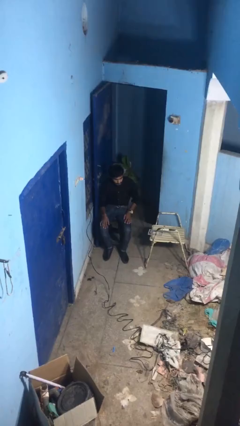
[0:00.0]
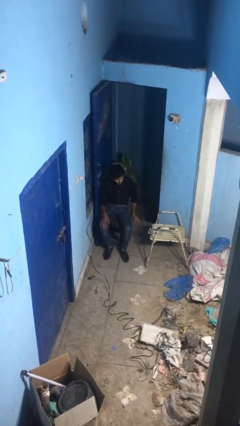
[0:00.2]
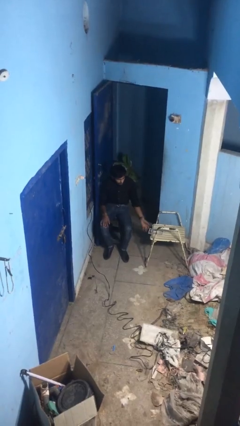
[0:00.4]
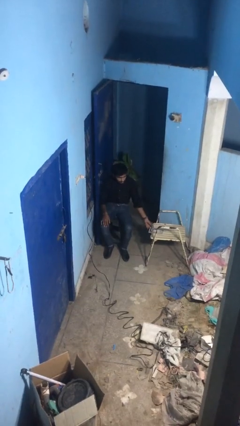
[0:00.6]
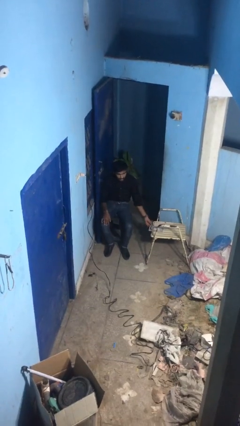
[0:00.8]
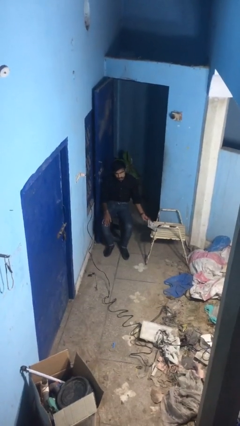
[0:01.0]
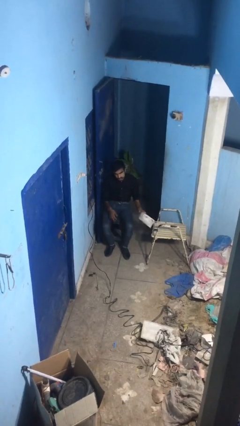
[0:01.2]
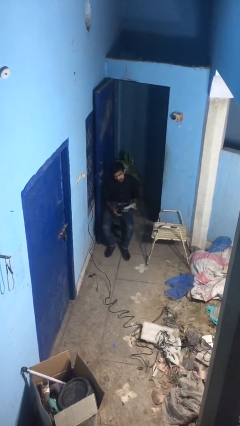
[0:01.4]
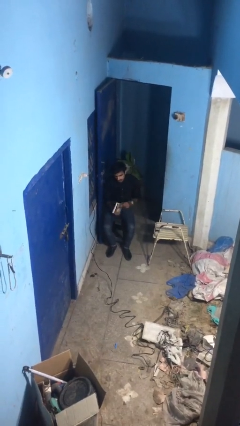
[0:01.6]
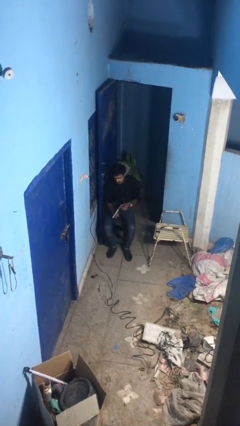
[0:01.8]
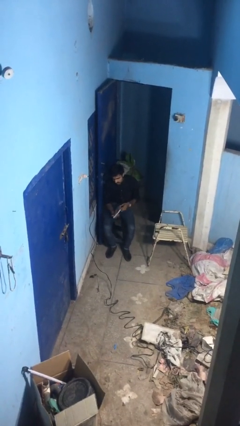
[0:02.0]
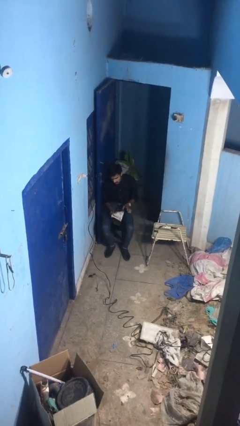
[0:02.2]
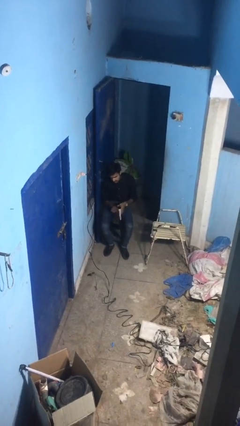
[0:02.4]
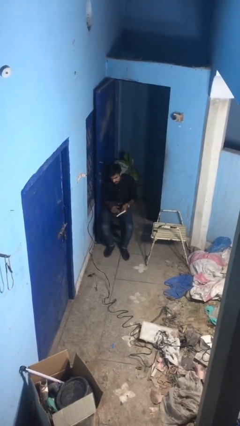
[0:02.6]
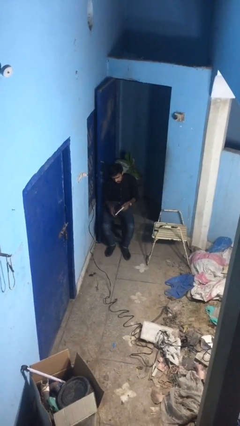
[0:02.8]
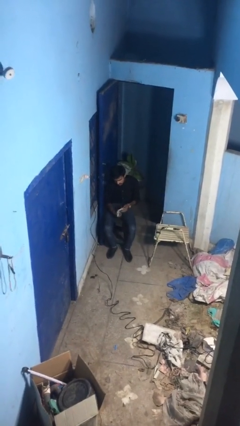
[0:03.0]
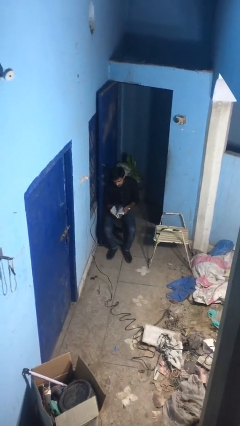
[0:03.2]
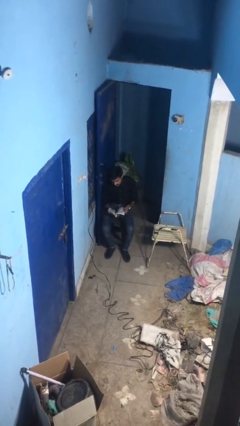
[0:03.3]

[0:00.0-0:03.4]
person picks up object from table

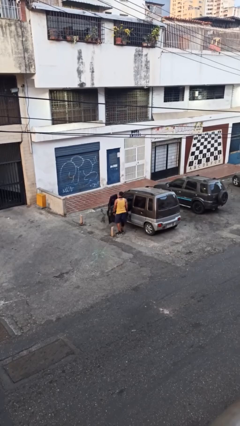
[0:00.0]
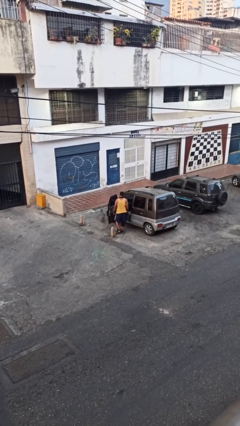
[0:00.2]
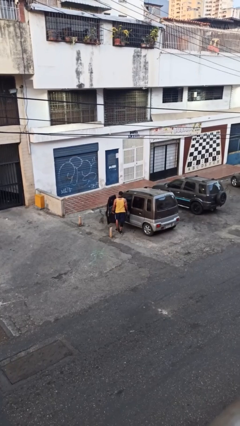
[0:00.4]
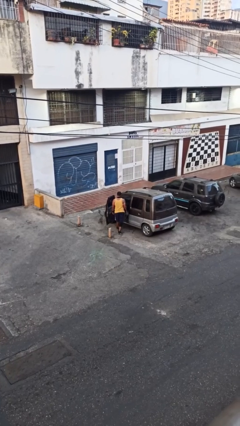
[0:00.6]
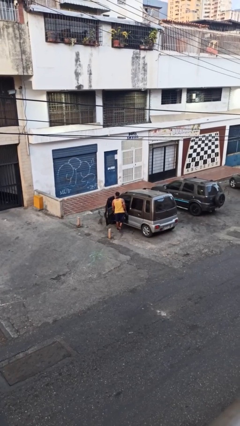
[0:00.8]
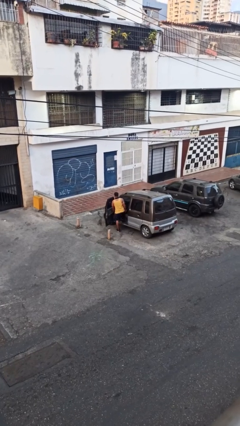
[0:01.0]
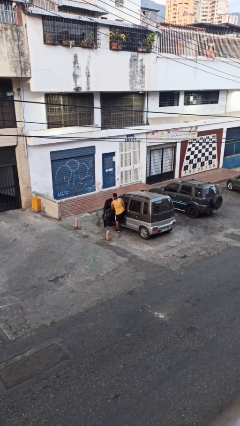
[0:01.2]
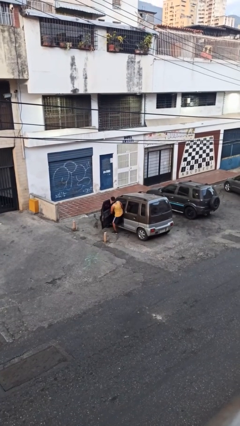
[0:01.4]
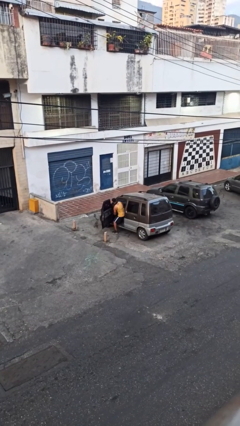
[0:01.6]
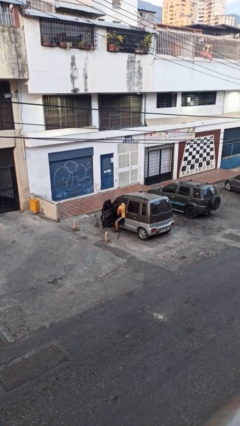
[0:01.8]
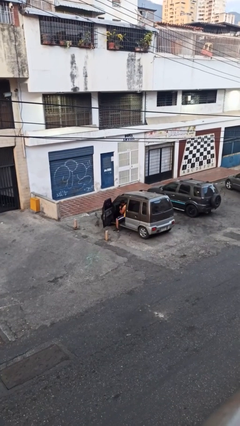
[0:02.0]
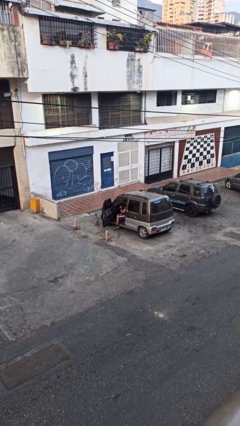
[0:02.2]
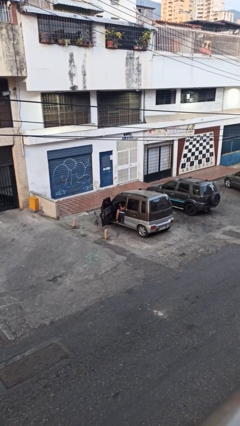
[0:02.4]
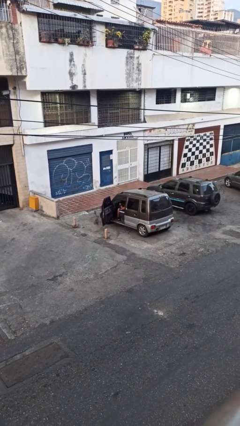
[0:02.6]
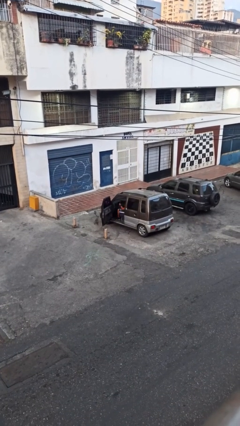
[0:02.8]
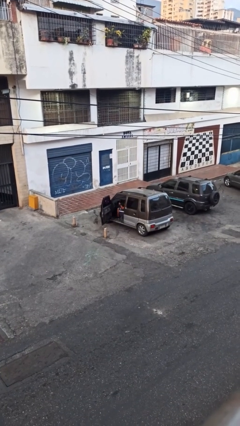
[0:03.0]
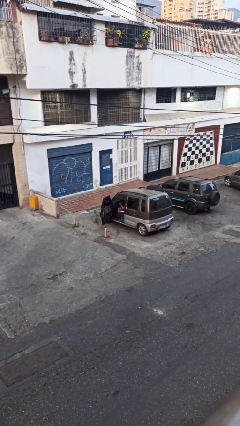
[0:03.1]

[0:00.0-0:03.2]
person enters car

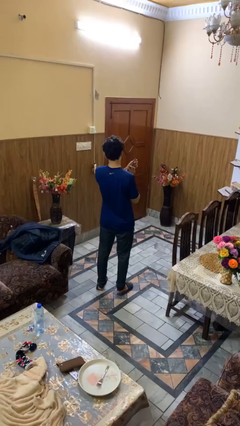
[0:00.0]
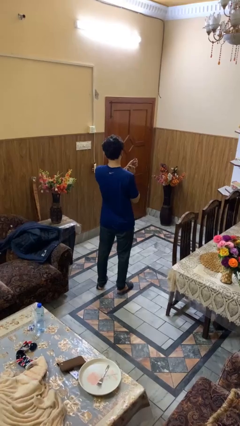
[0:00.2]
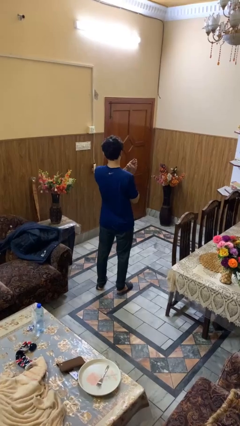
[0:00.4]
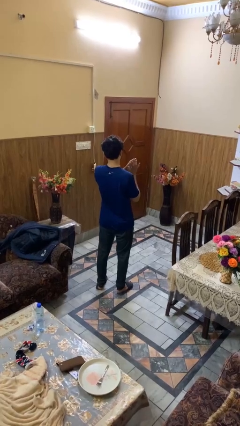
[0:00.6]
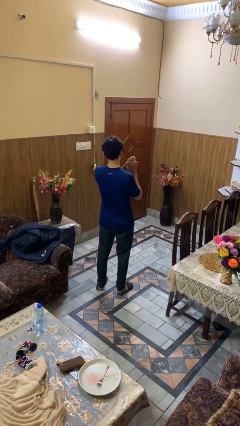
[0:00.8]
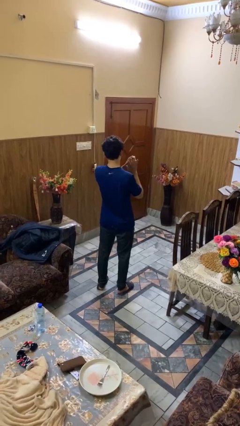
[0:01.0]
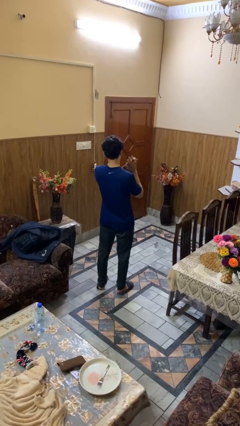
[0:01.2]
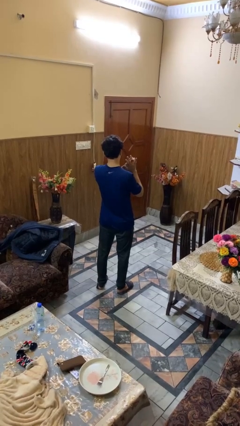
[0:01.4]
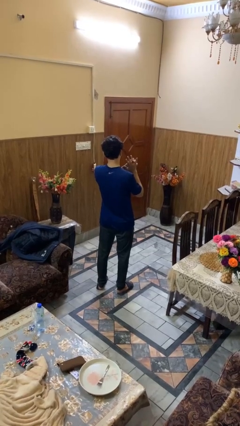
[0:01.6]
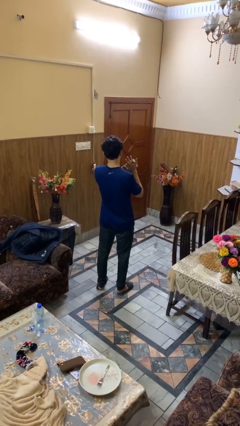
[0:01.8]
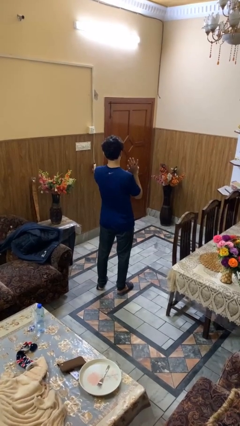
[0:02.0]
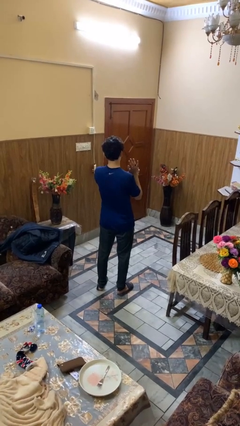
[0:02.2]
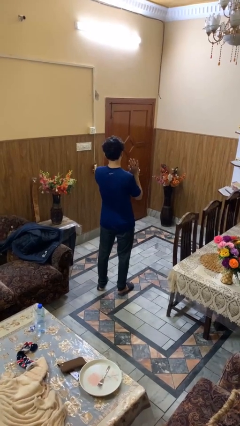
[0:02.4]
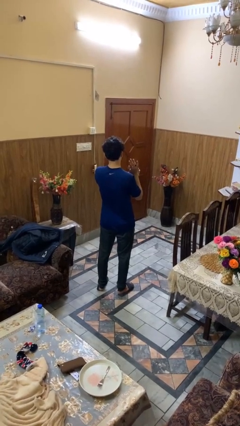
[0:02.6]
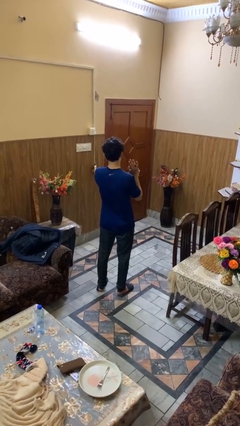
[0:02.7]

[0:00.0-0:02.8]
person puts on ring

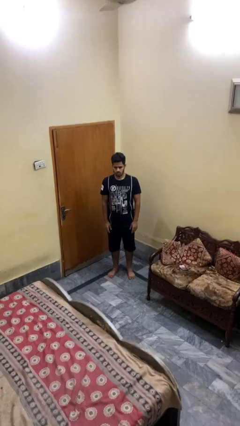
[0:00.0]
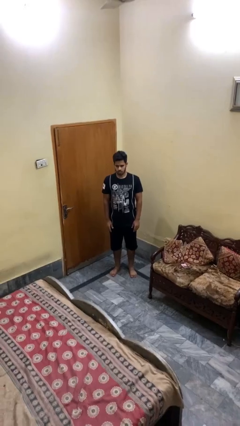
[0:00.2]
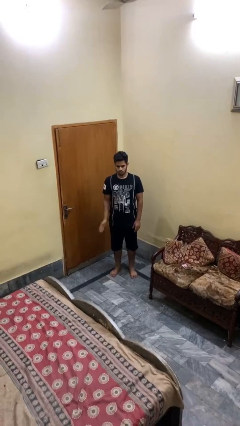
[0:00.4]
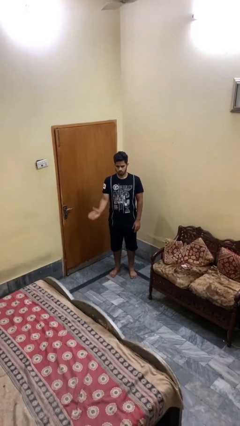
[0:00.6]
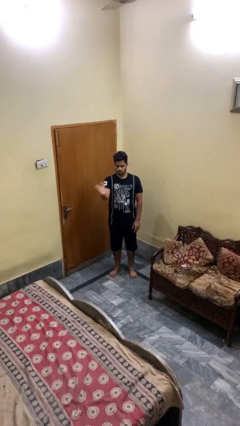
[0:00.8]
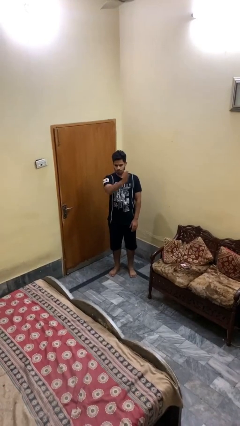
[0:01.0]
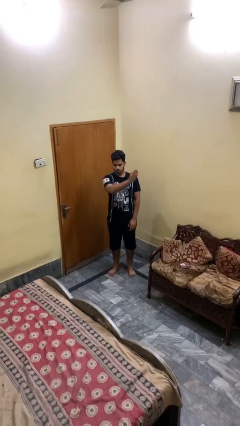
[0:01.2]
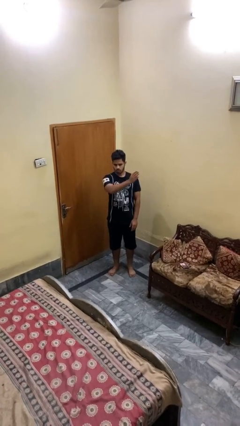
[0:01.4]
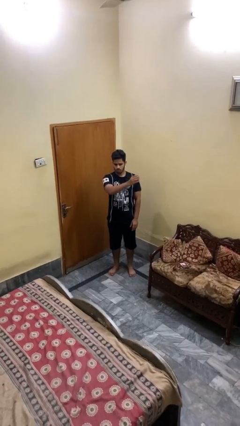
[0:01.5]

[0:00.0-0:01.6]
person gestures swipe left

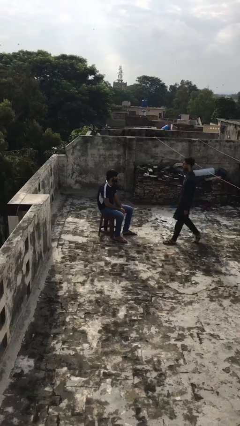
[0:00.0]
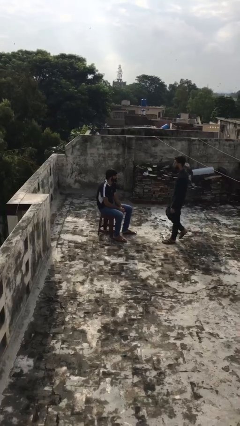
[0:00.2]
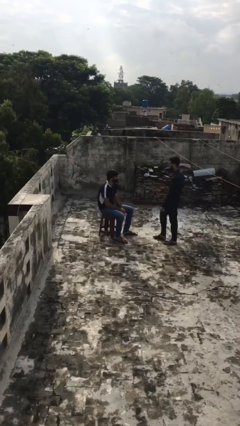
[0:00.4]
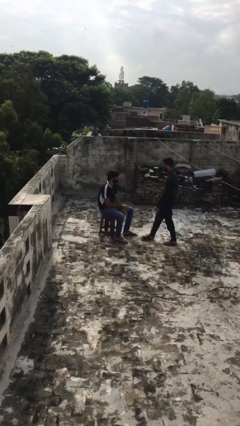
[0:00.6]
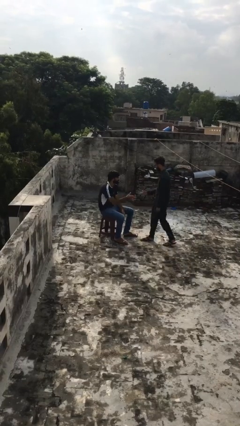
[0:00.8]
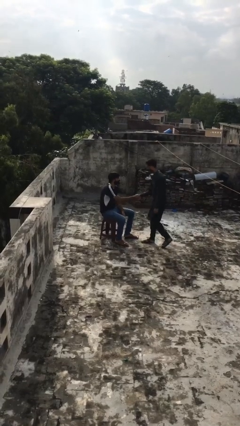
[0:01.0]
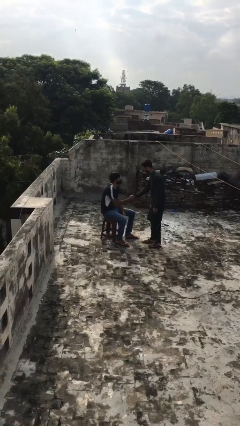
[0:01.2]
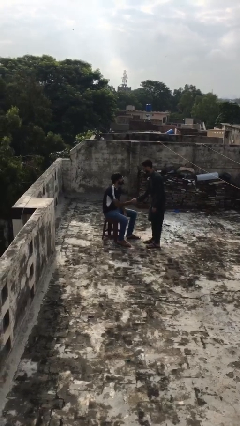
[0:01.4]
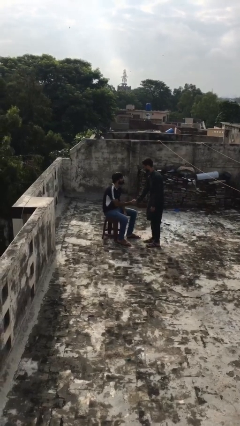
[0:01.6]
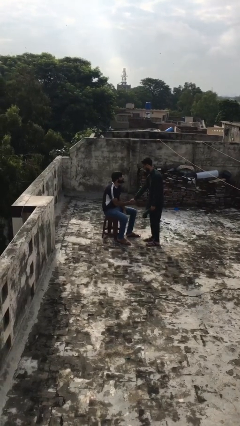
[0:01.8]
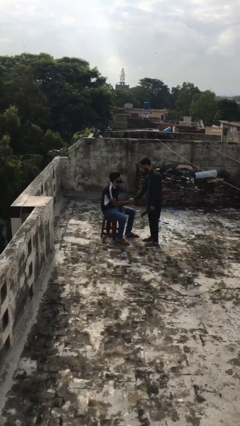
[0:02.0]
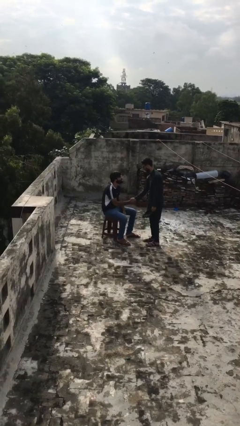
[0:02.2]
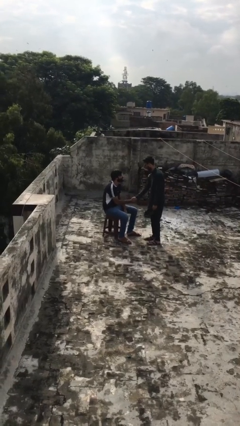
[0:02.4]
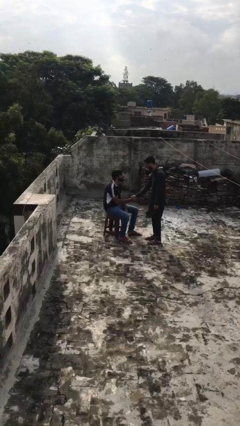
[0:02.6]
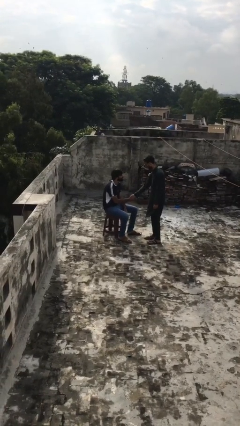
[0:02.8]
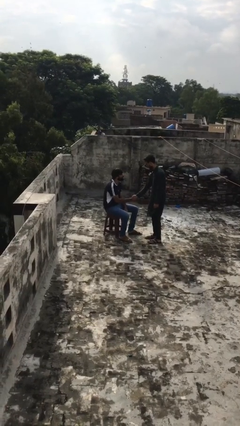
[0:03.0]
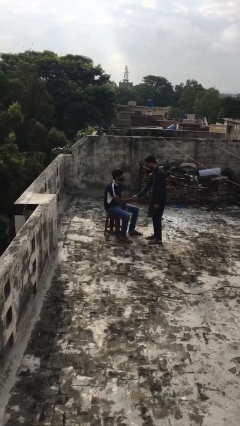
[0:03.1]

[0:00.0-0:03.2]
person shakes hand

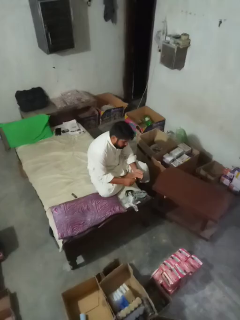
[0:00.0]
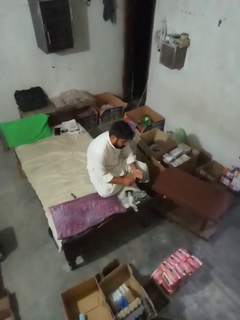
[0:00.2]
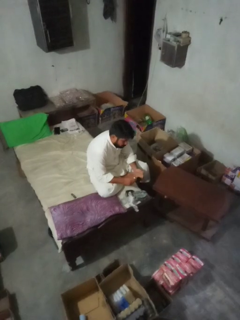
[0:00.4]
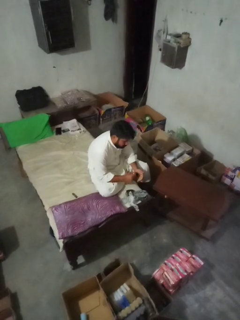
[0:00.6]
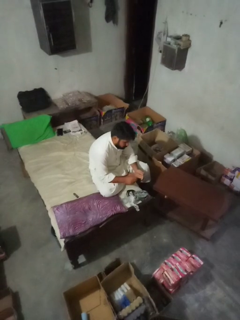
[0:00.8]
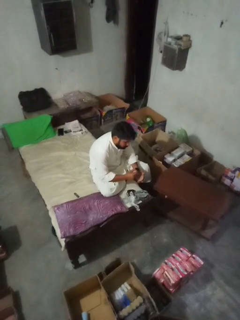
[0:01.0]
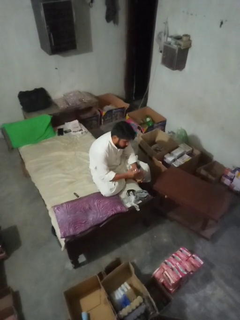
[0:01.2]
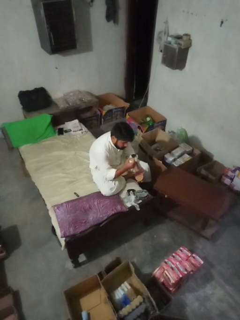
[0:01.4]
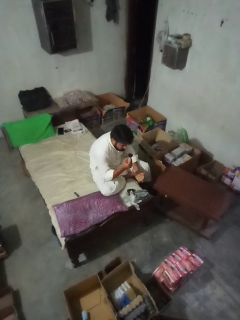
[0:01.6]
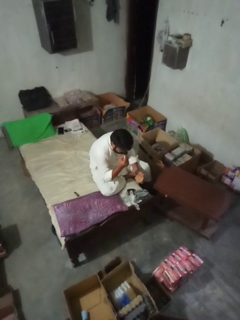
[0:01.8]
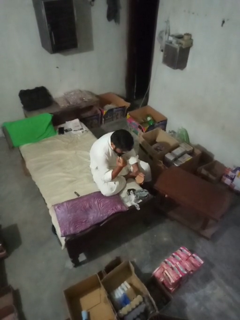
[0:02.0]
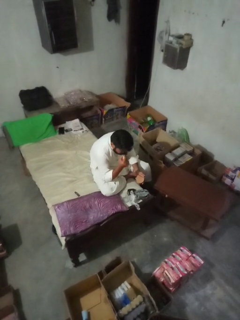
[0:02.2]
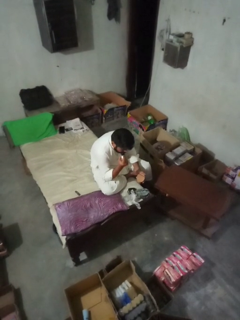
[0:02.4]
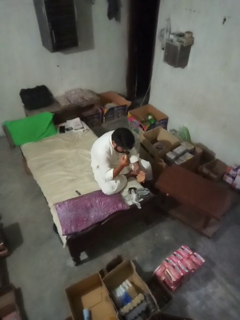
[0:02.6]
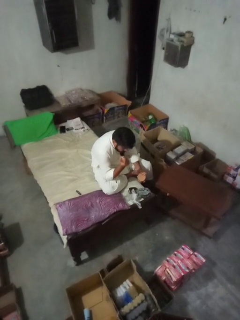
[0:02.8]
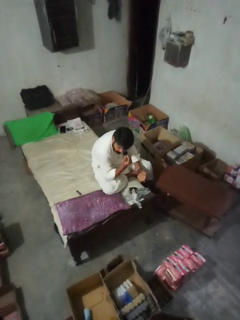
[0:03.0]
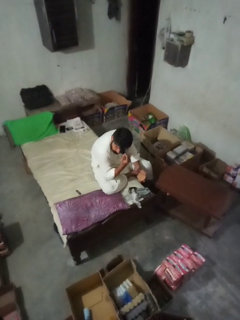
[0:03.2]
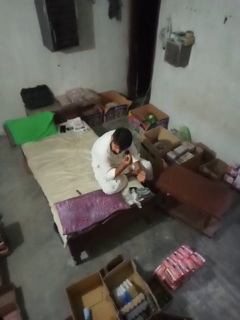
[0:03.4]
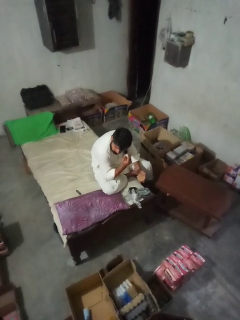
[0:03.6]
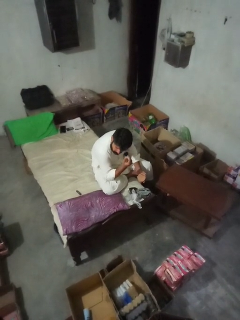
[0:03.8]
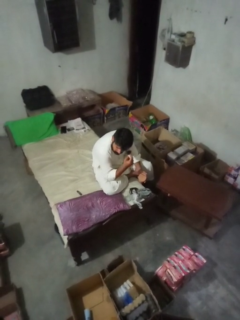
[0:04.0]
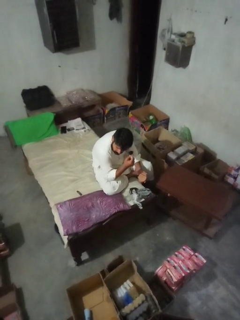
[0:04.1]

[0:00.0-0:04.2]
person applies eye makeup
